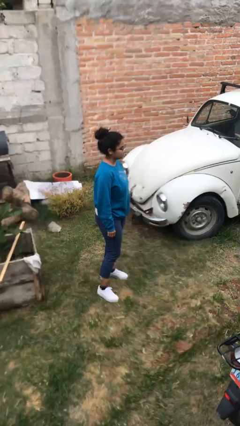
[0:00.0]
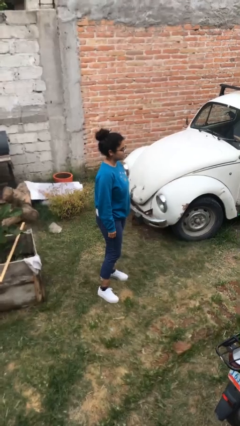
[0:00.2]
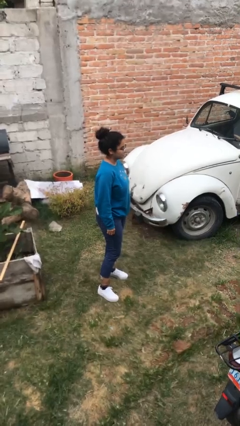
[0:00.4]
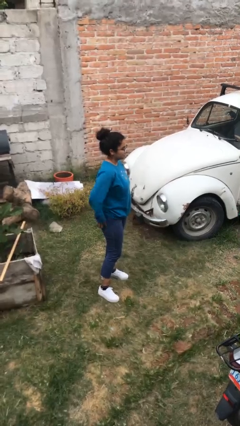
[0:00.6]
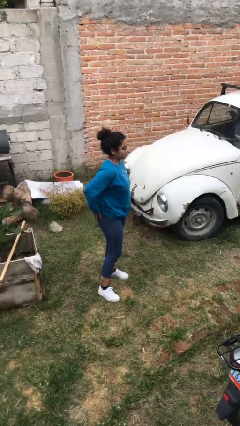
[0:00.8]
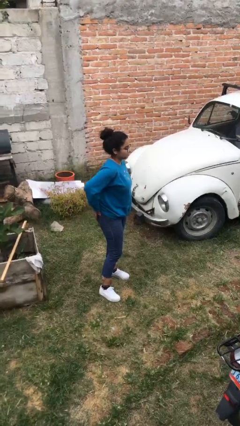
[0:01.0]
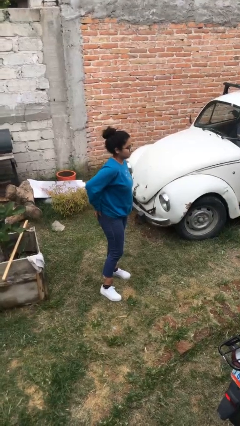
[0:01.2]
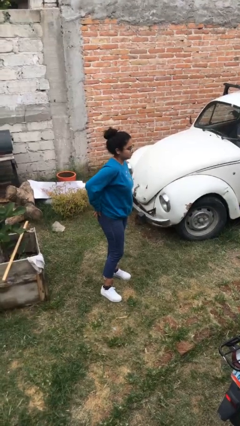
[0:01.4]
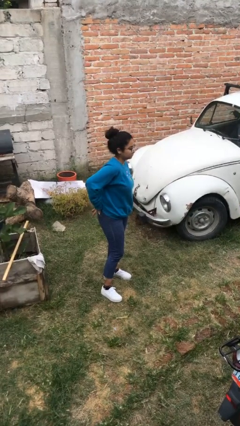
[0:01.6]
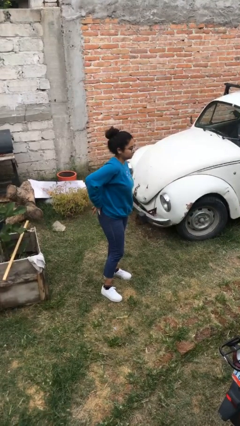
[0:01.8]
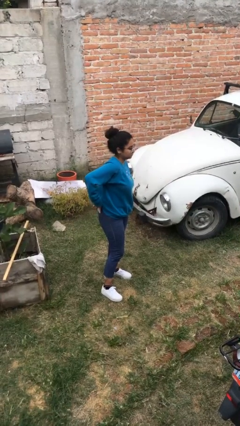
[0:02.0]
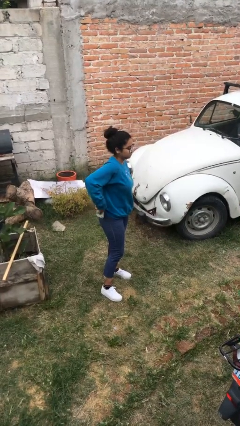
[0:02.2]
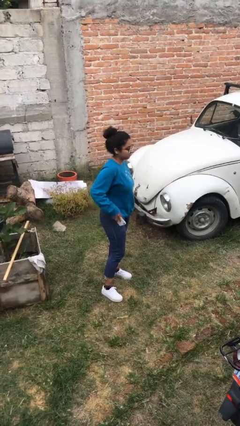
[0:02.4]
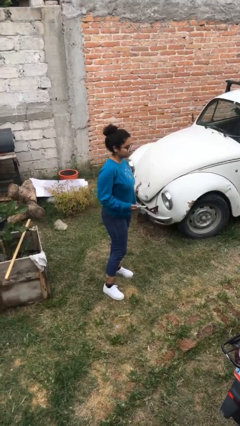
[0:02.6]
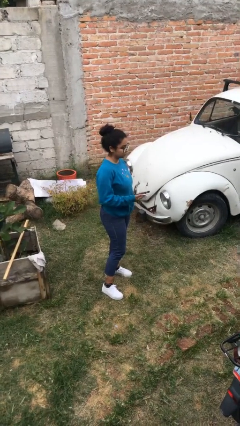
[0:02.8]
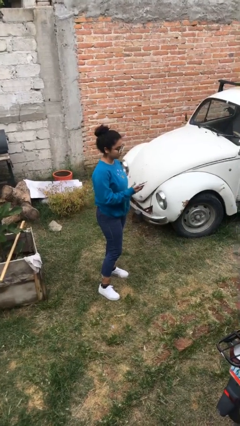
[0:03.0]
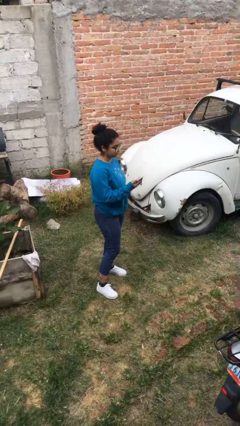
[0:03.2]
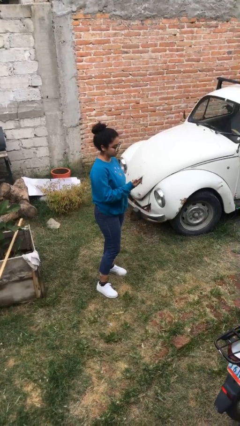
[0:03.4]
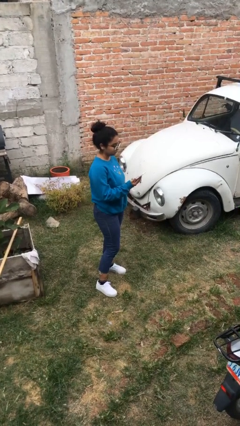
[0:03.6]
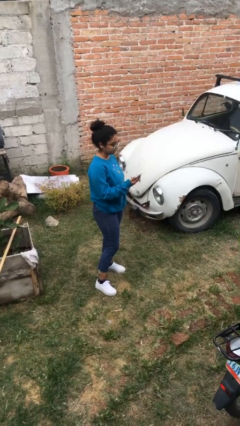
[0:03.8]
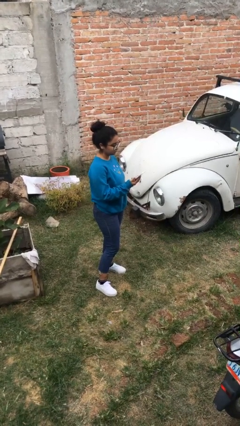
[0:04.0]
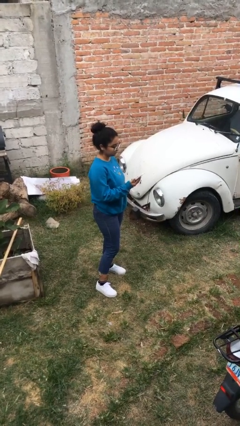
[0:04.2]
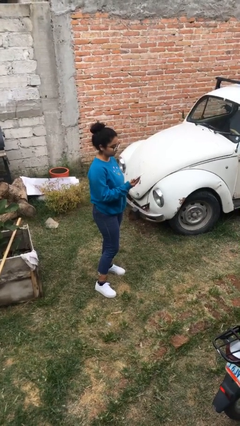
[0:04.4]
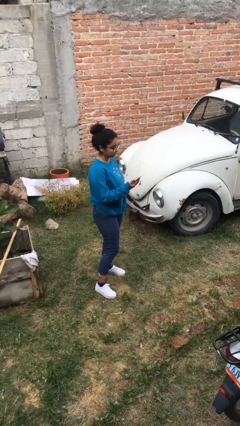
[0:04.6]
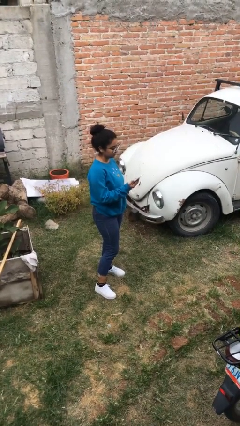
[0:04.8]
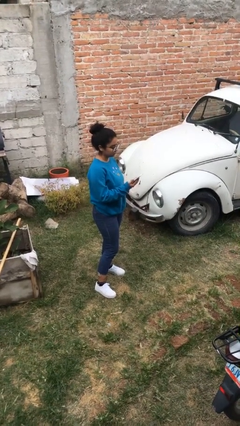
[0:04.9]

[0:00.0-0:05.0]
person takes phone from pocket

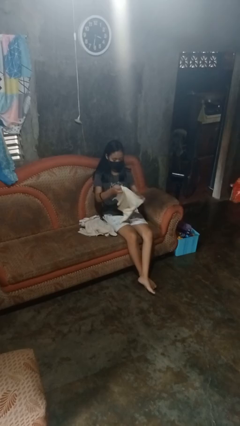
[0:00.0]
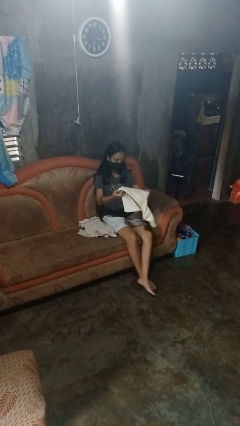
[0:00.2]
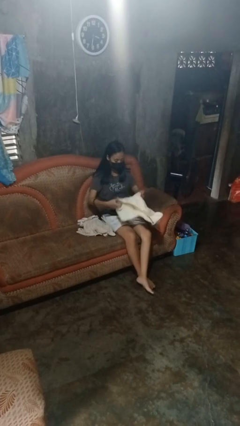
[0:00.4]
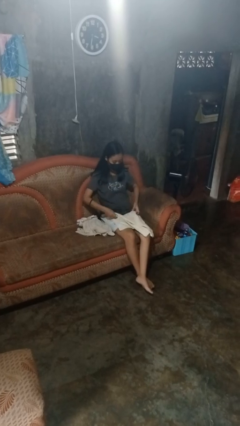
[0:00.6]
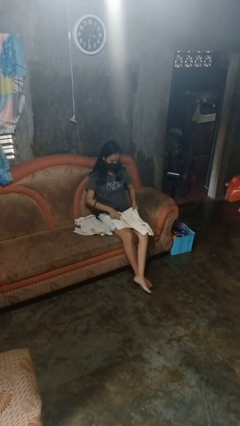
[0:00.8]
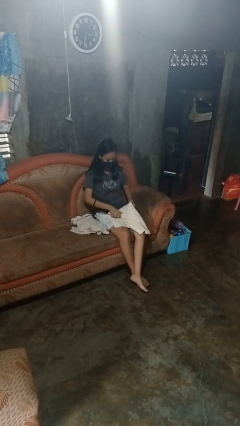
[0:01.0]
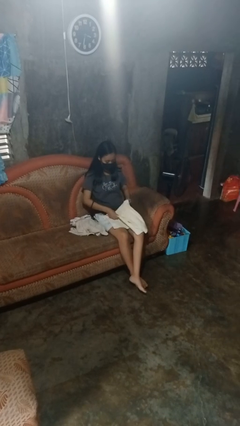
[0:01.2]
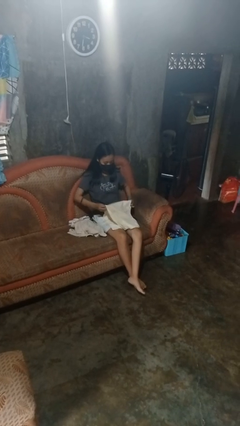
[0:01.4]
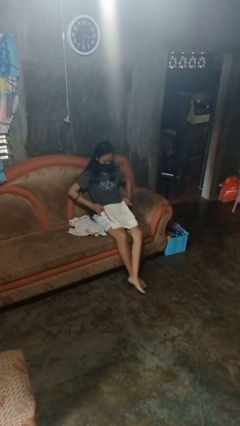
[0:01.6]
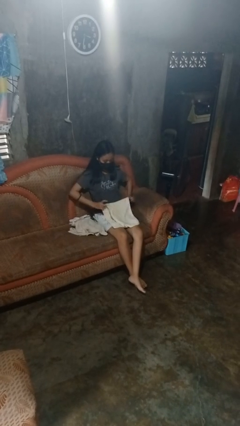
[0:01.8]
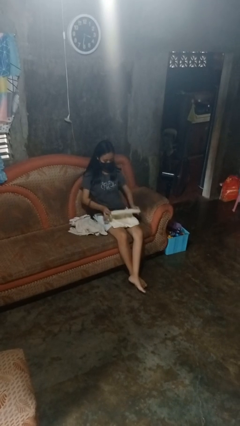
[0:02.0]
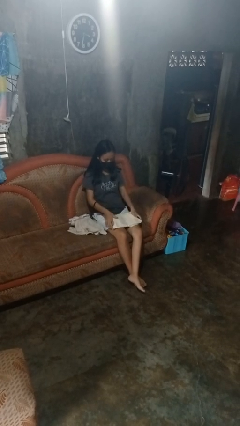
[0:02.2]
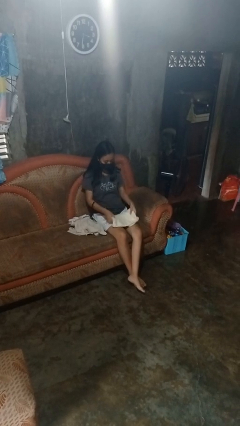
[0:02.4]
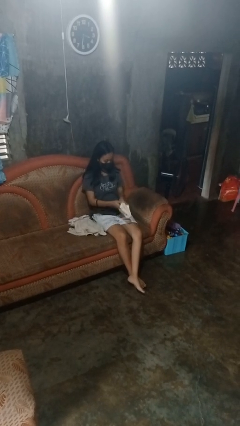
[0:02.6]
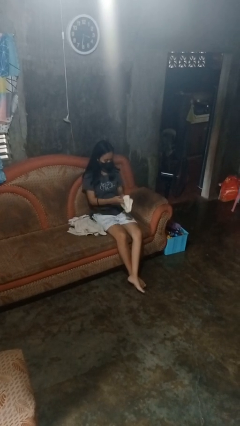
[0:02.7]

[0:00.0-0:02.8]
person folds towel

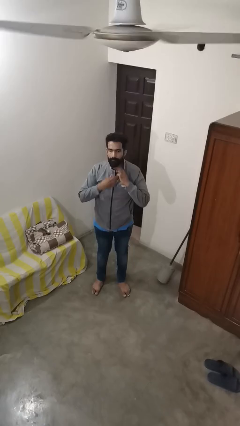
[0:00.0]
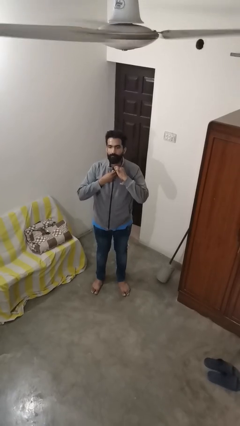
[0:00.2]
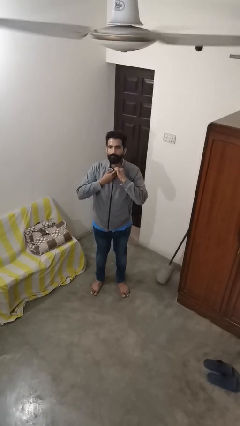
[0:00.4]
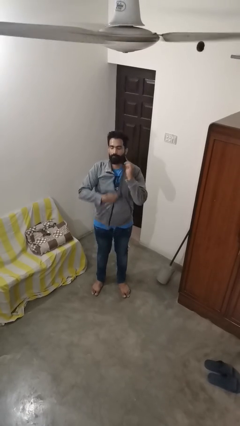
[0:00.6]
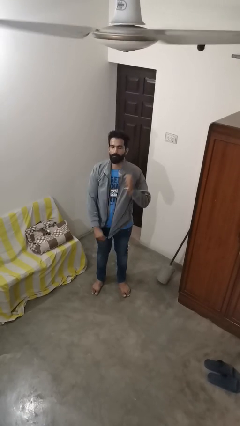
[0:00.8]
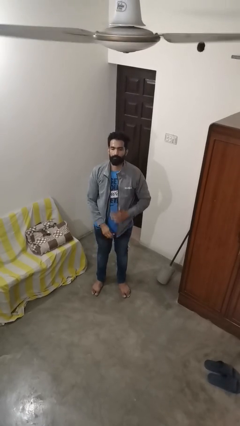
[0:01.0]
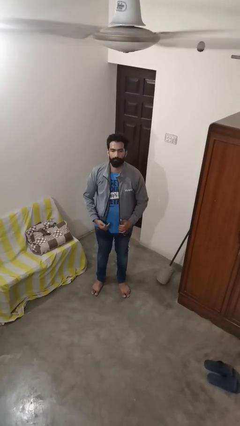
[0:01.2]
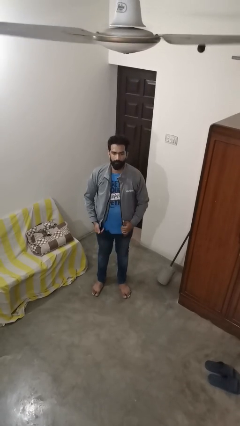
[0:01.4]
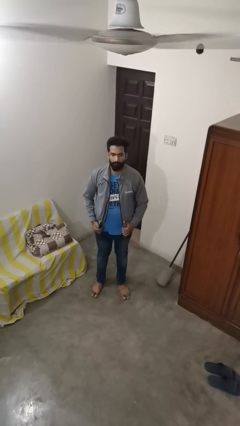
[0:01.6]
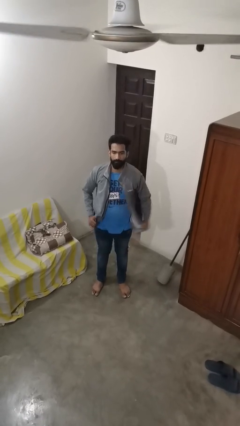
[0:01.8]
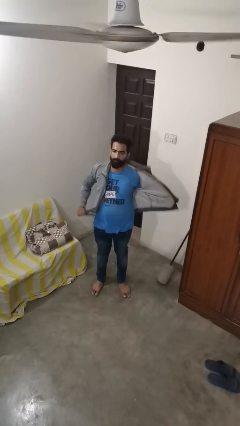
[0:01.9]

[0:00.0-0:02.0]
person unzips jacket

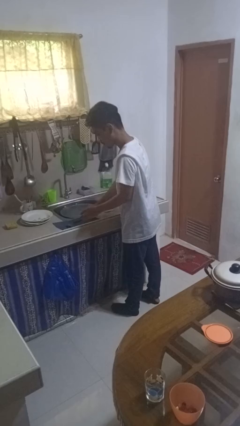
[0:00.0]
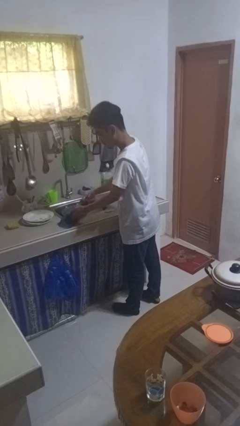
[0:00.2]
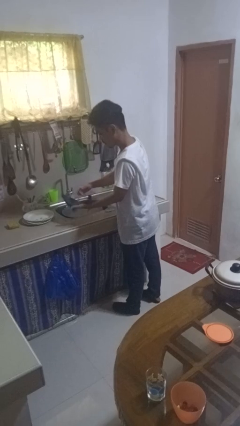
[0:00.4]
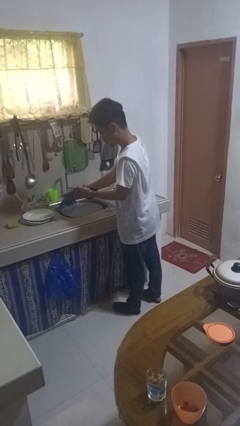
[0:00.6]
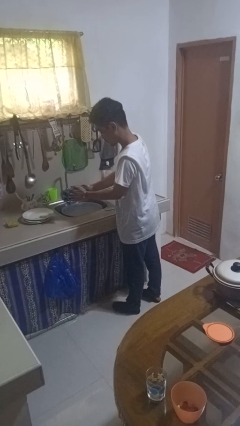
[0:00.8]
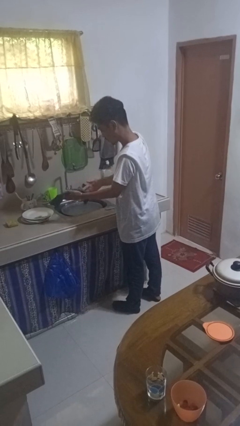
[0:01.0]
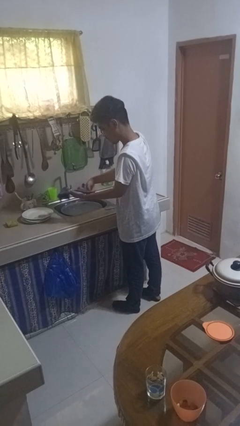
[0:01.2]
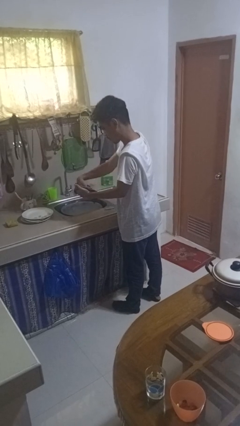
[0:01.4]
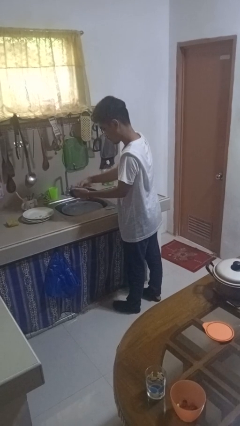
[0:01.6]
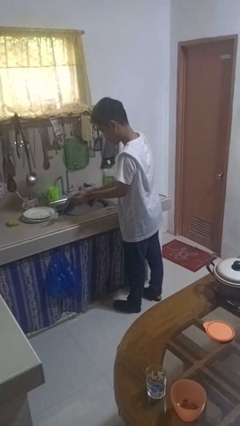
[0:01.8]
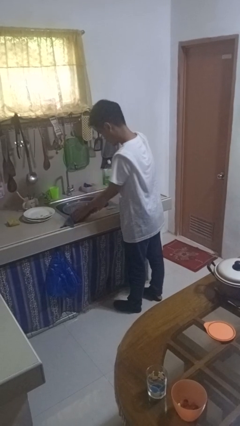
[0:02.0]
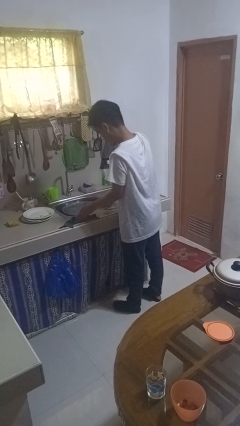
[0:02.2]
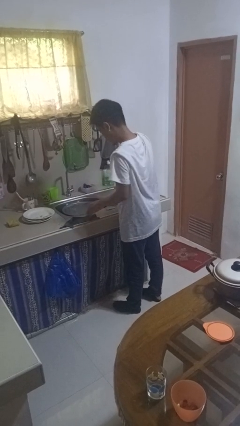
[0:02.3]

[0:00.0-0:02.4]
person dries hands with towel

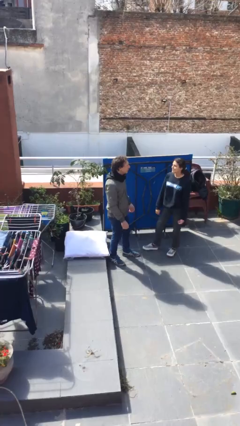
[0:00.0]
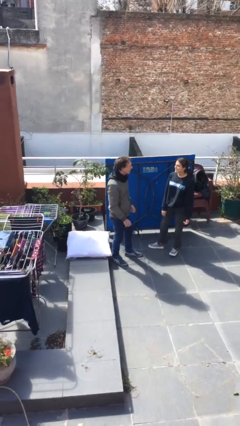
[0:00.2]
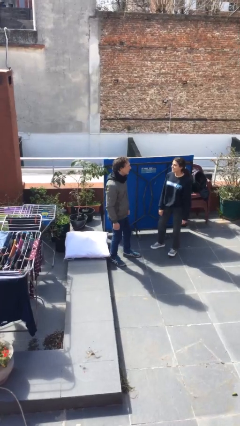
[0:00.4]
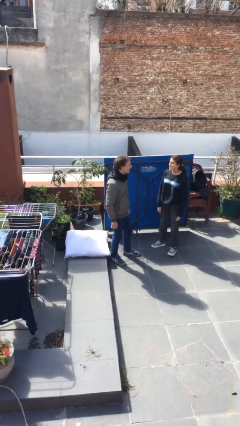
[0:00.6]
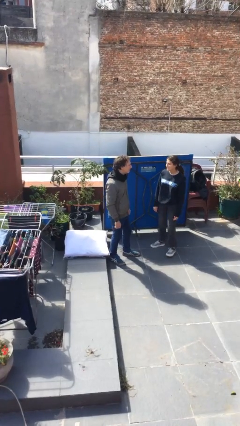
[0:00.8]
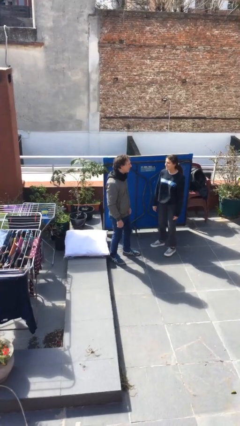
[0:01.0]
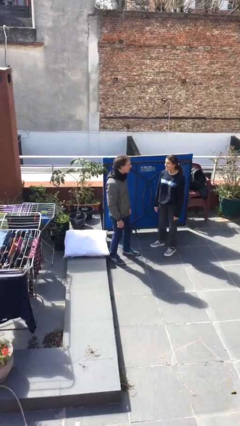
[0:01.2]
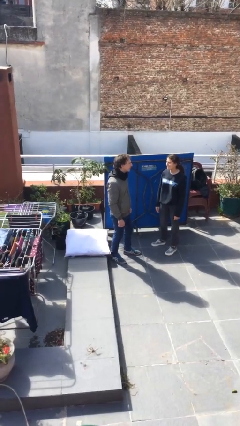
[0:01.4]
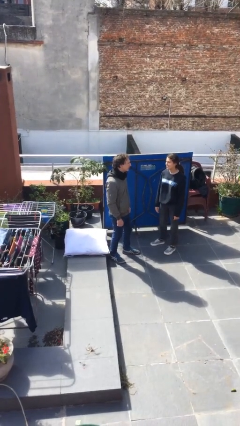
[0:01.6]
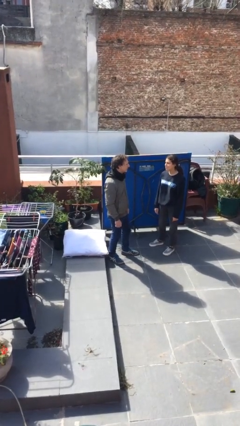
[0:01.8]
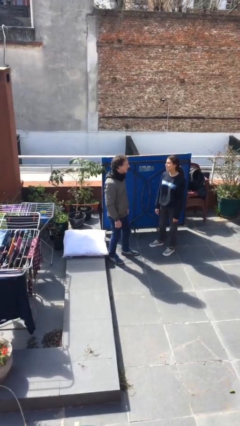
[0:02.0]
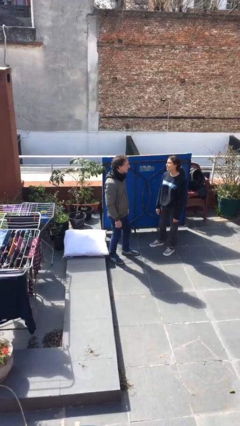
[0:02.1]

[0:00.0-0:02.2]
person talks to person

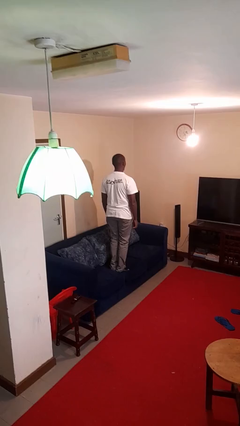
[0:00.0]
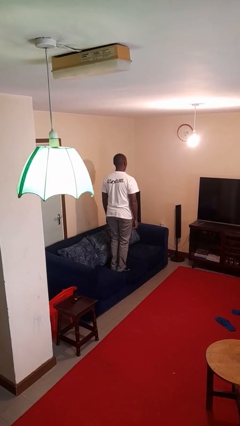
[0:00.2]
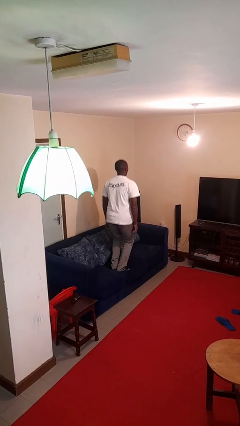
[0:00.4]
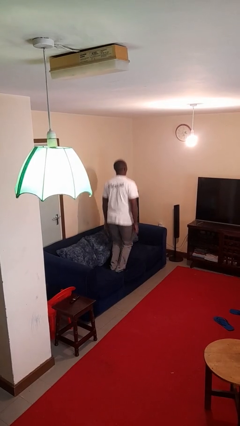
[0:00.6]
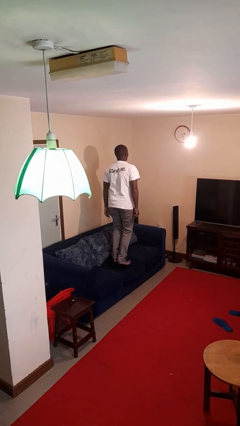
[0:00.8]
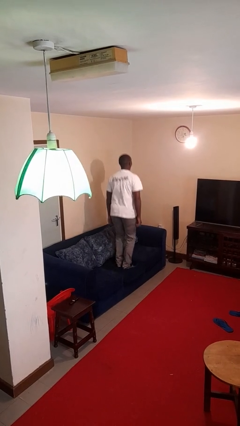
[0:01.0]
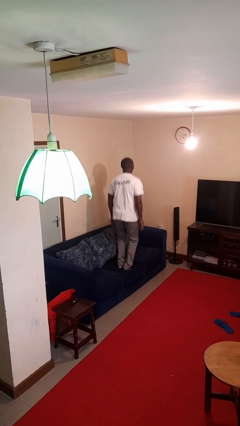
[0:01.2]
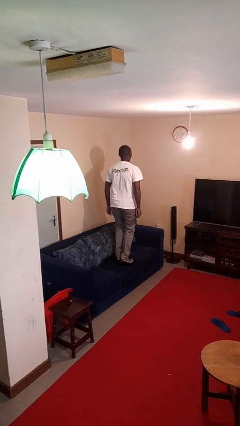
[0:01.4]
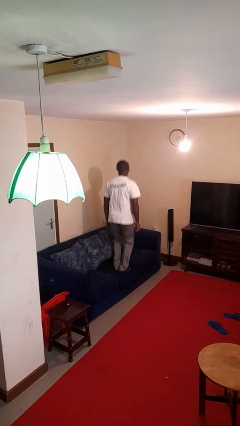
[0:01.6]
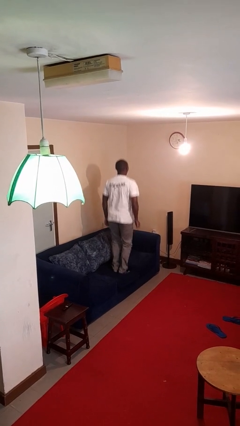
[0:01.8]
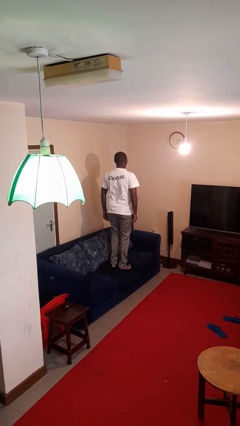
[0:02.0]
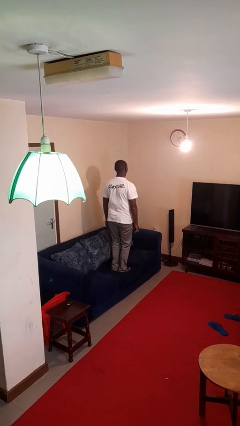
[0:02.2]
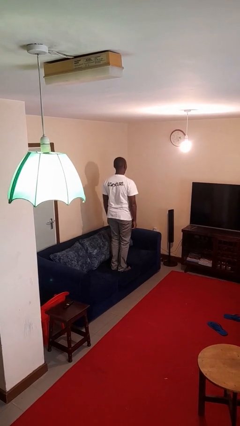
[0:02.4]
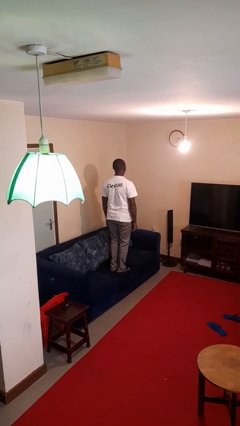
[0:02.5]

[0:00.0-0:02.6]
person jumps on couch

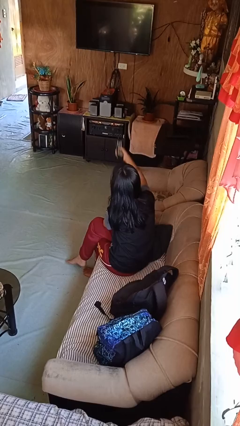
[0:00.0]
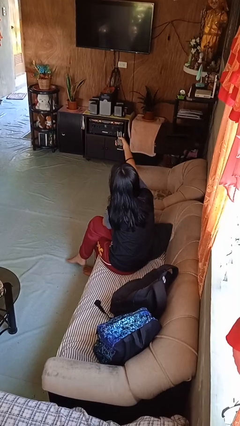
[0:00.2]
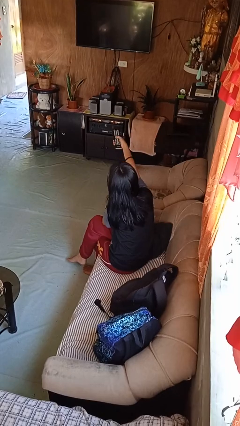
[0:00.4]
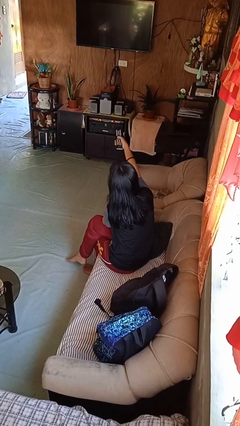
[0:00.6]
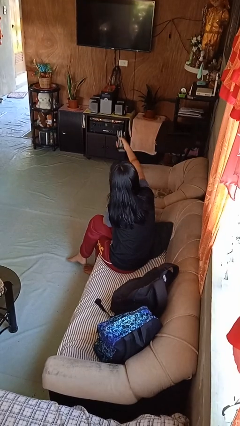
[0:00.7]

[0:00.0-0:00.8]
person uses television remote
